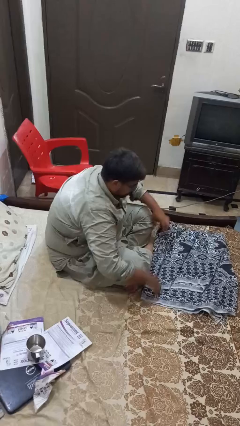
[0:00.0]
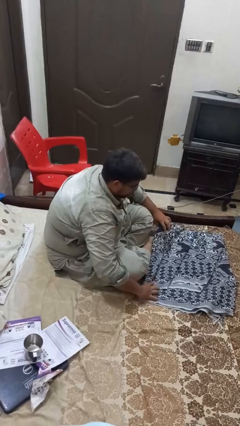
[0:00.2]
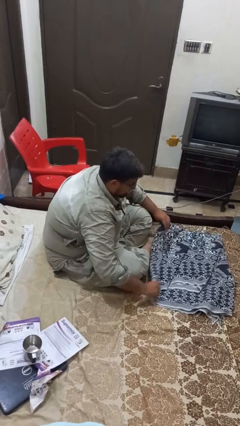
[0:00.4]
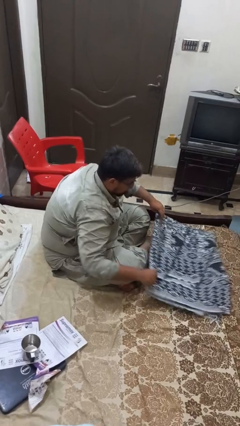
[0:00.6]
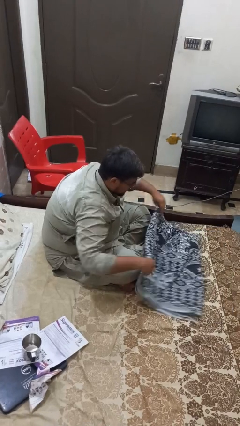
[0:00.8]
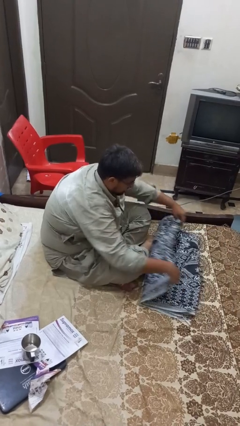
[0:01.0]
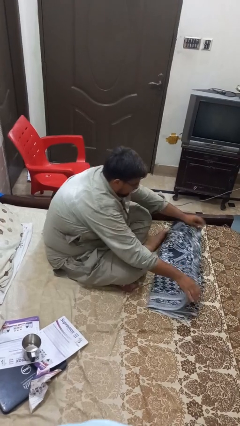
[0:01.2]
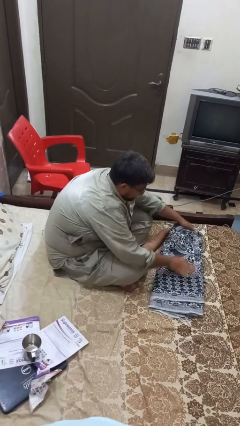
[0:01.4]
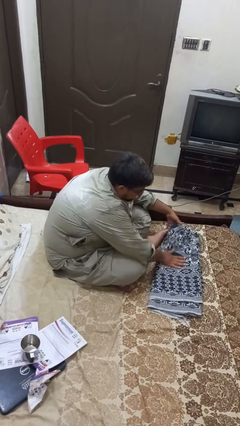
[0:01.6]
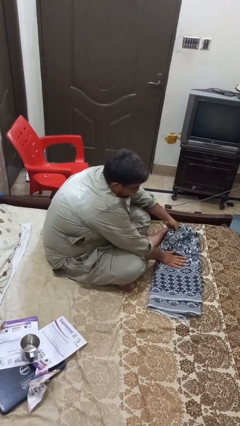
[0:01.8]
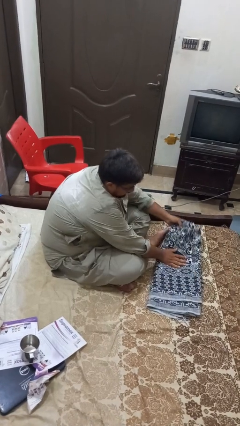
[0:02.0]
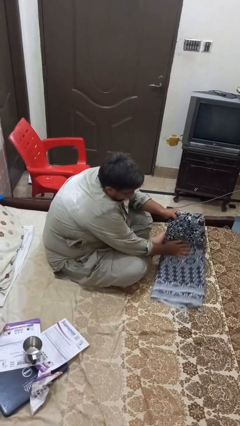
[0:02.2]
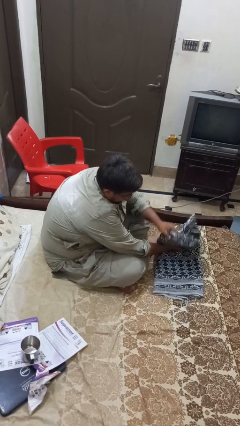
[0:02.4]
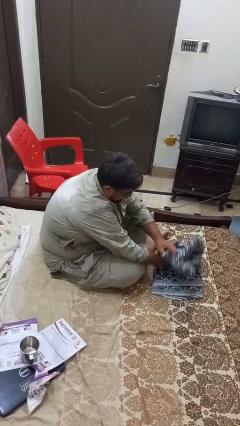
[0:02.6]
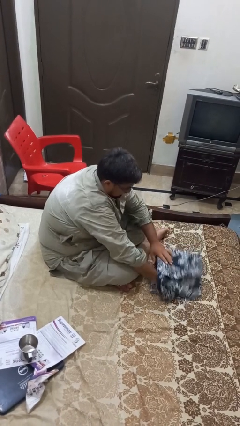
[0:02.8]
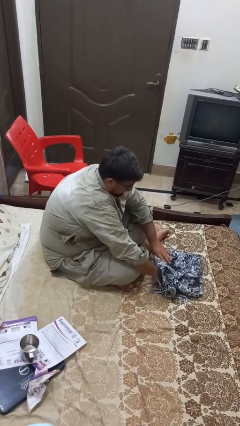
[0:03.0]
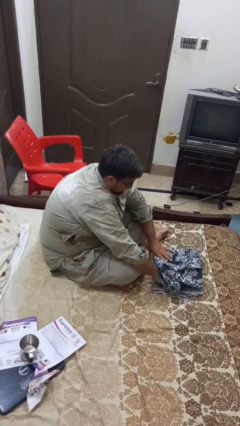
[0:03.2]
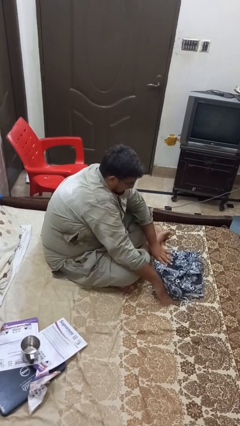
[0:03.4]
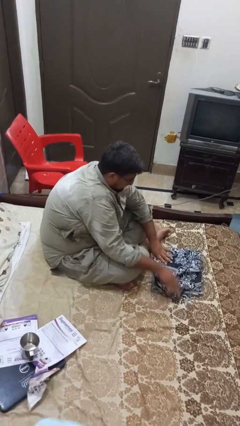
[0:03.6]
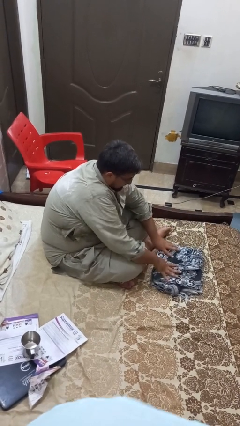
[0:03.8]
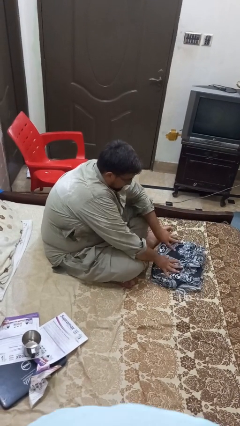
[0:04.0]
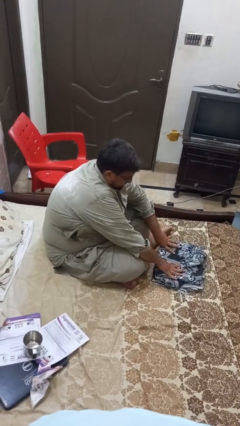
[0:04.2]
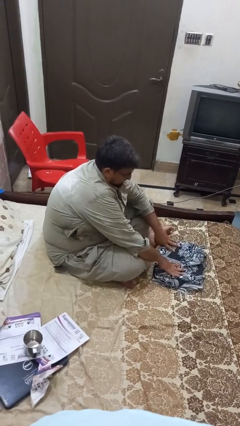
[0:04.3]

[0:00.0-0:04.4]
person folds blanket

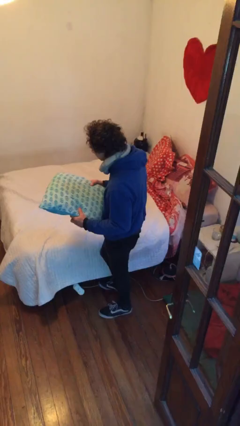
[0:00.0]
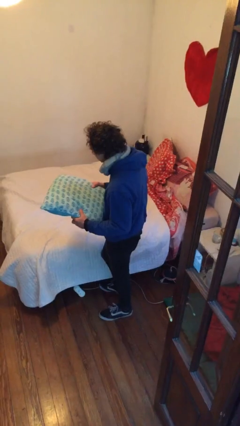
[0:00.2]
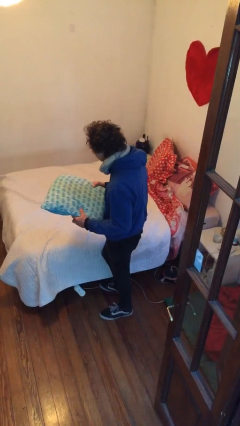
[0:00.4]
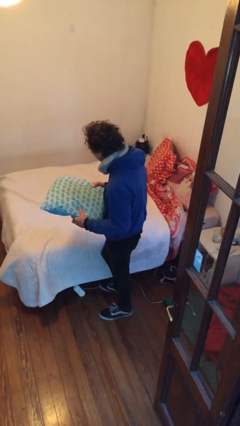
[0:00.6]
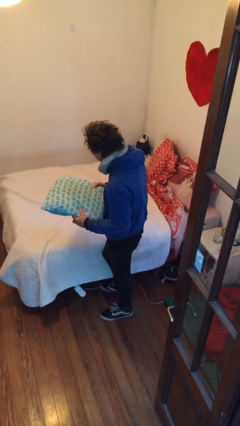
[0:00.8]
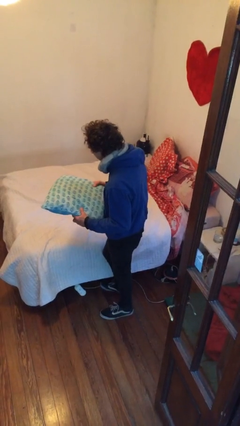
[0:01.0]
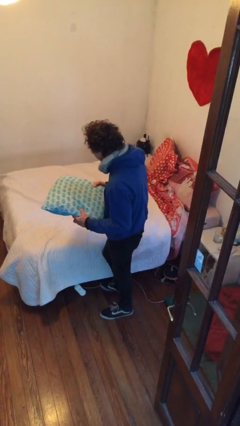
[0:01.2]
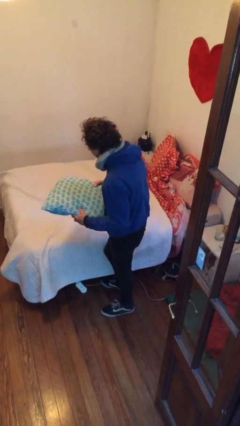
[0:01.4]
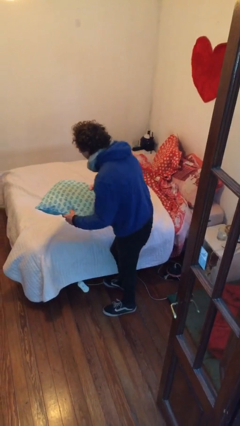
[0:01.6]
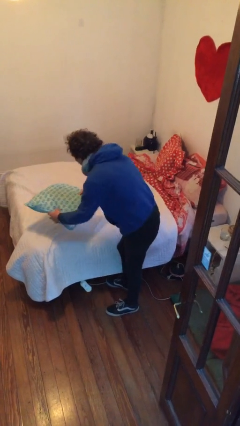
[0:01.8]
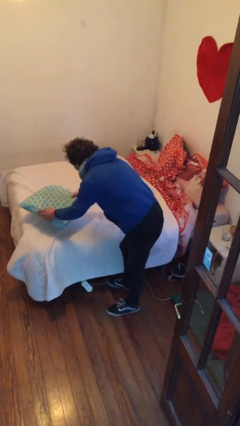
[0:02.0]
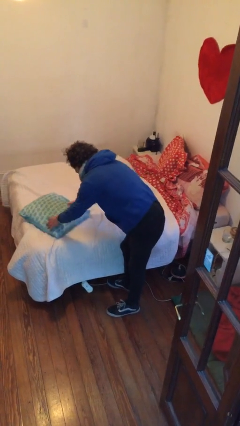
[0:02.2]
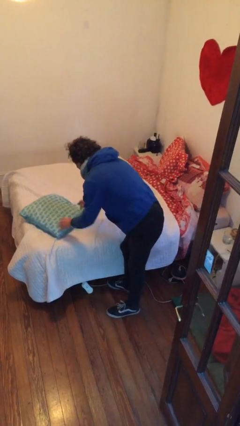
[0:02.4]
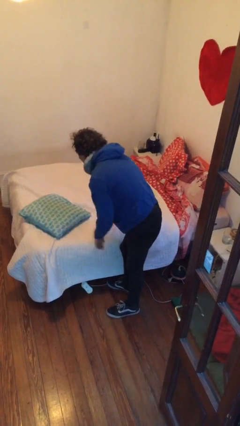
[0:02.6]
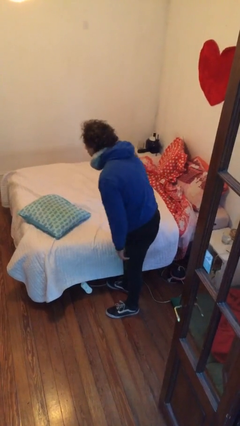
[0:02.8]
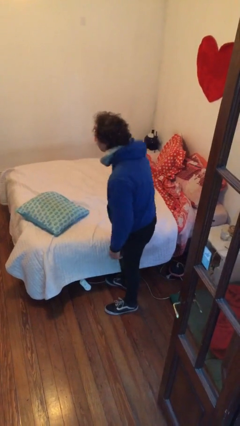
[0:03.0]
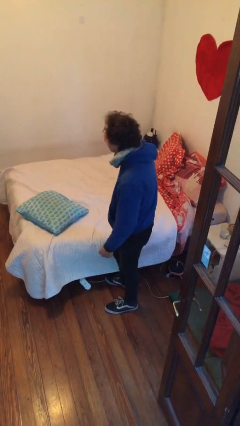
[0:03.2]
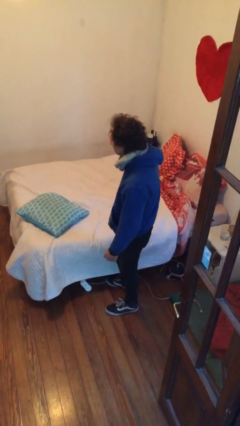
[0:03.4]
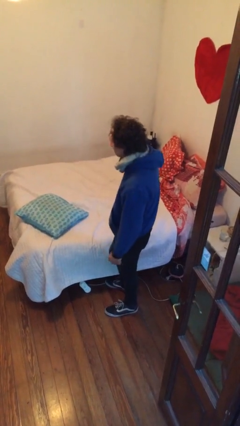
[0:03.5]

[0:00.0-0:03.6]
person puts down object on bed

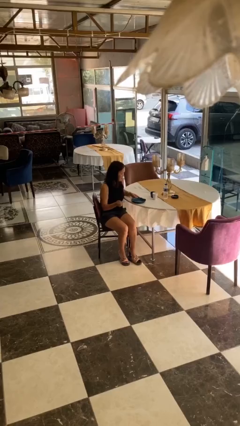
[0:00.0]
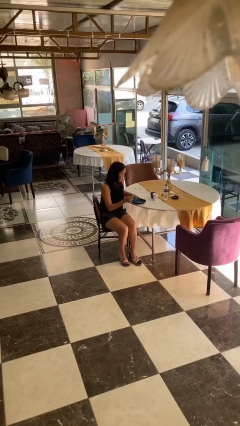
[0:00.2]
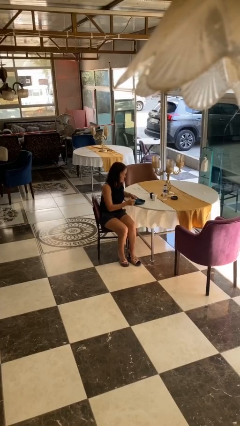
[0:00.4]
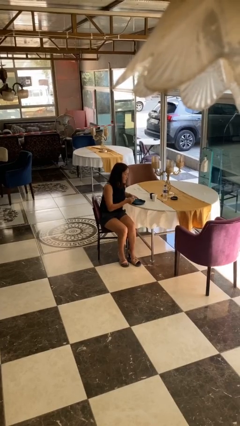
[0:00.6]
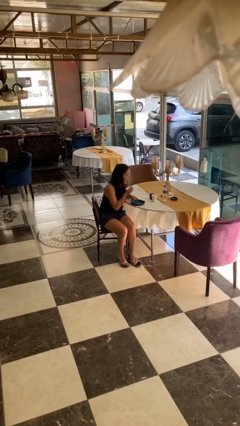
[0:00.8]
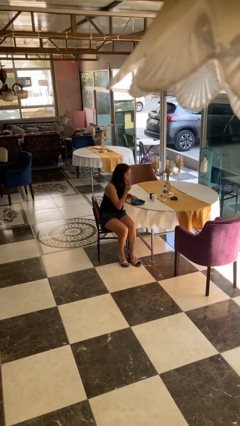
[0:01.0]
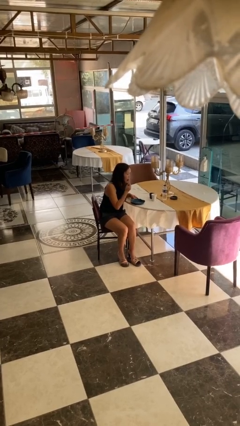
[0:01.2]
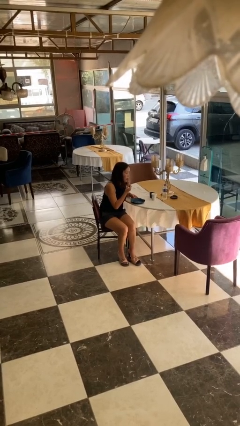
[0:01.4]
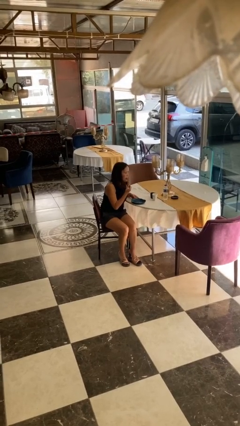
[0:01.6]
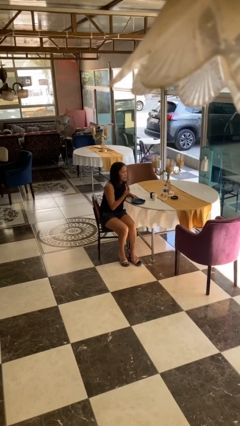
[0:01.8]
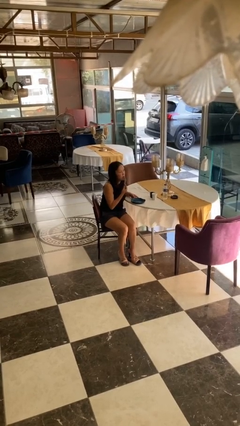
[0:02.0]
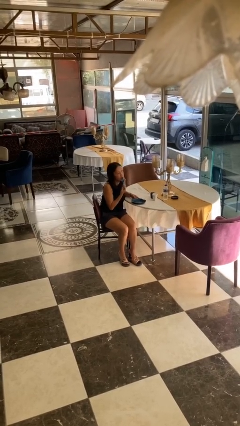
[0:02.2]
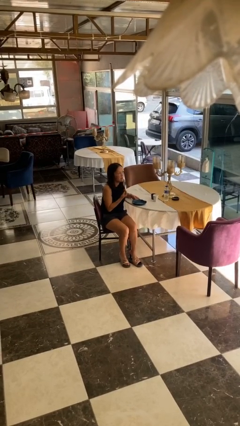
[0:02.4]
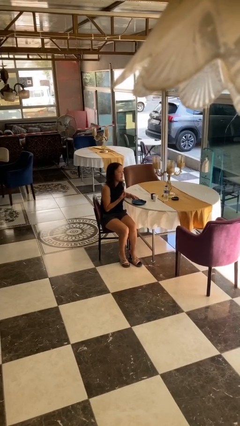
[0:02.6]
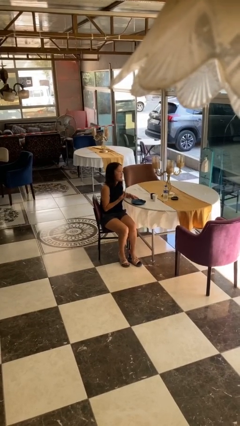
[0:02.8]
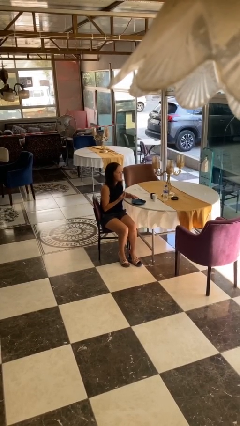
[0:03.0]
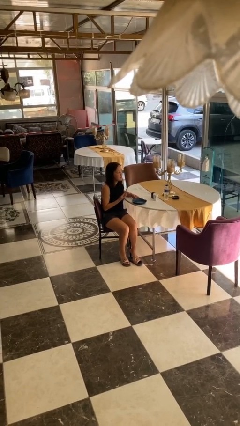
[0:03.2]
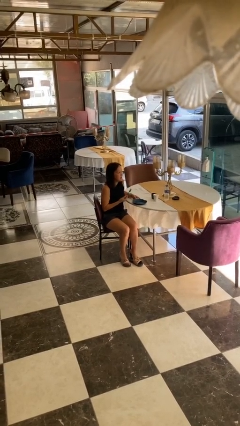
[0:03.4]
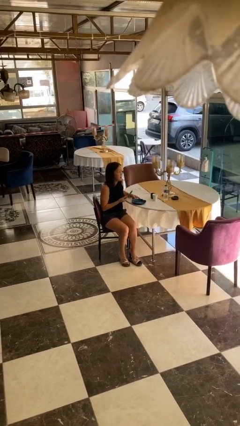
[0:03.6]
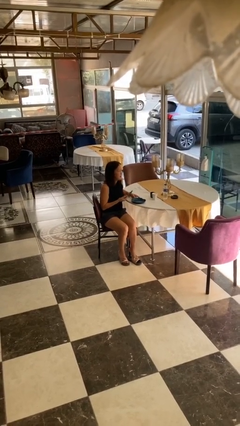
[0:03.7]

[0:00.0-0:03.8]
person eats with utensil

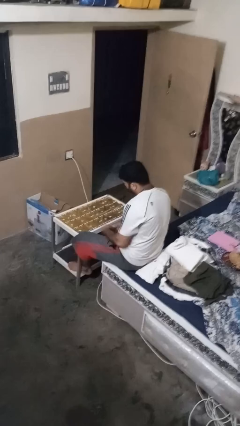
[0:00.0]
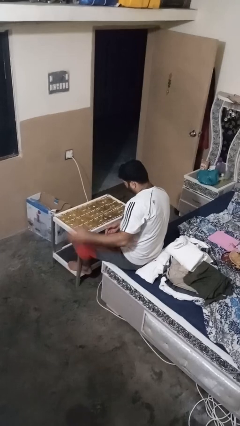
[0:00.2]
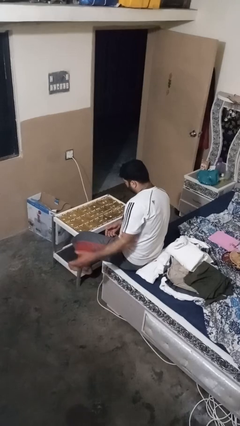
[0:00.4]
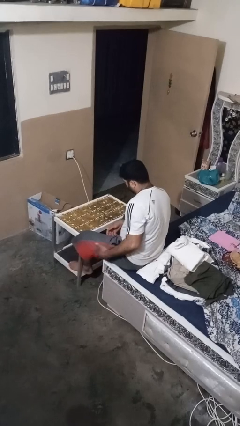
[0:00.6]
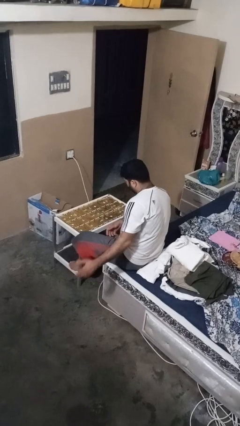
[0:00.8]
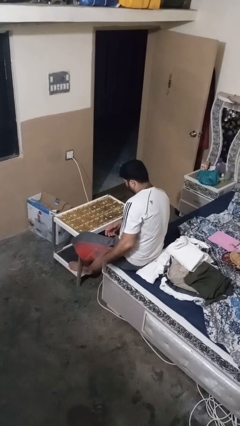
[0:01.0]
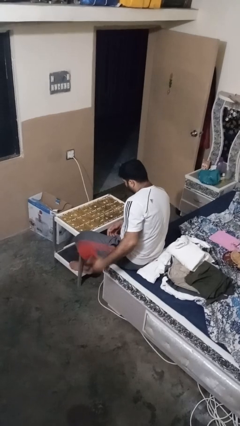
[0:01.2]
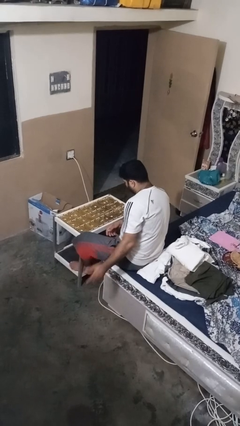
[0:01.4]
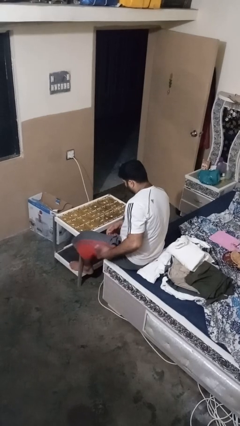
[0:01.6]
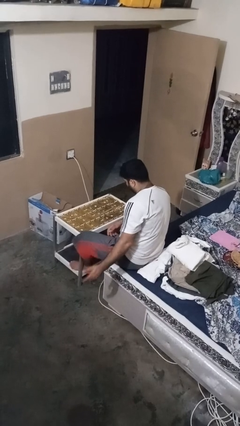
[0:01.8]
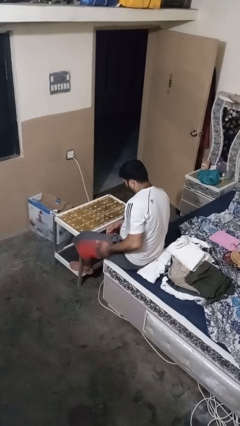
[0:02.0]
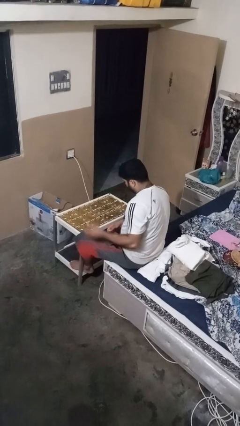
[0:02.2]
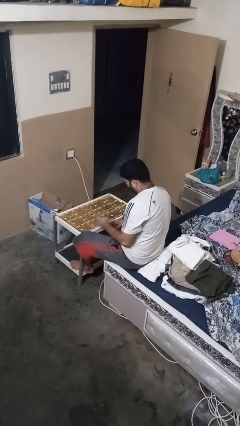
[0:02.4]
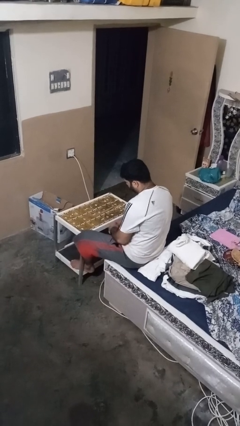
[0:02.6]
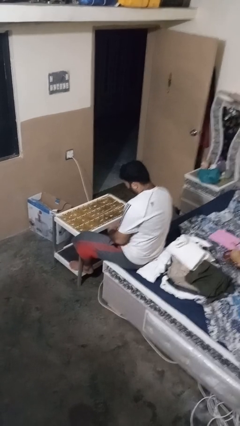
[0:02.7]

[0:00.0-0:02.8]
person slaps hands on thighs

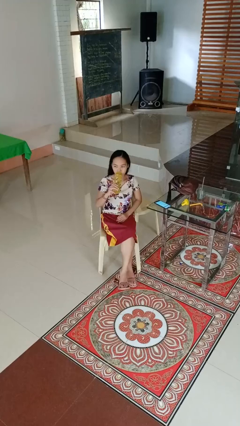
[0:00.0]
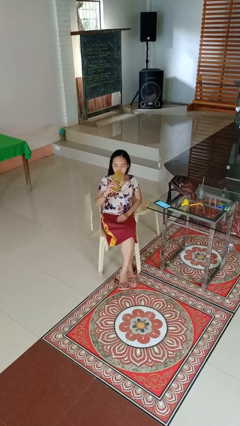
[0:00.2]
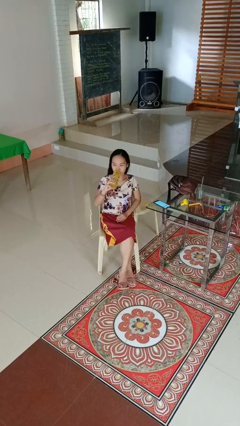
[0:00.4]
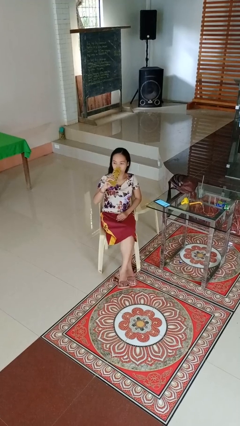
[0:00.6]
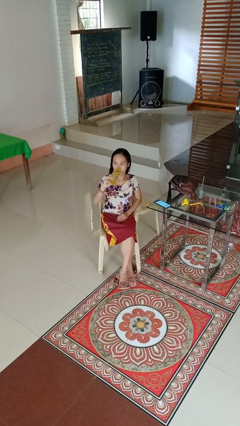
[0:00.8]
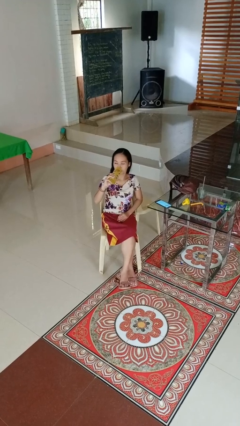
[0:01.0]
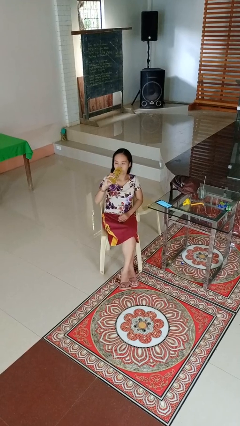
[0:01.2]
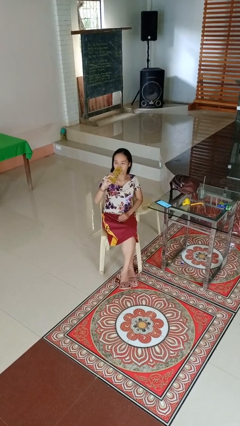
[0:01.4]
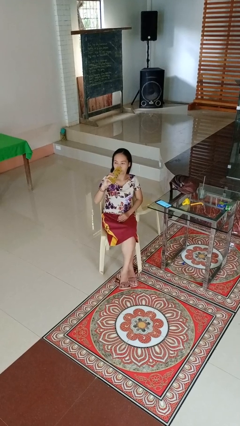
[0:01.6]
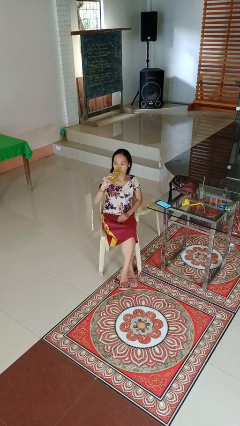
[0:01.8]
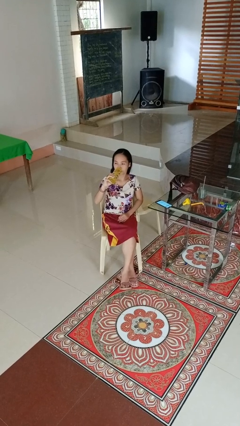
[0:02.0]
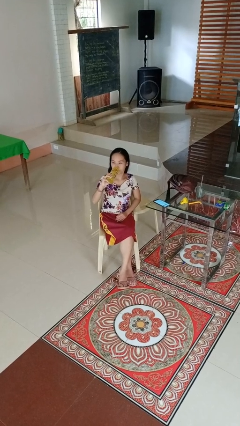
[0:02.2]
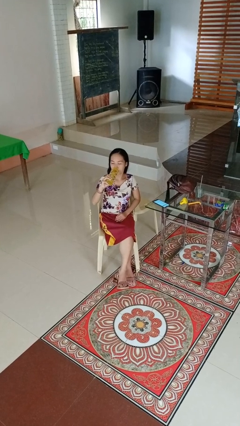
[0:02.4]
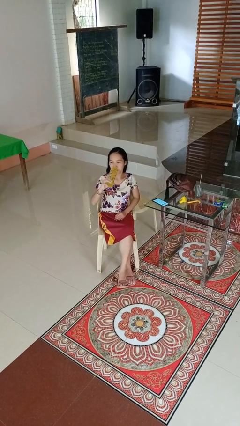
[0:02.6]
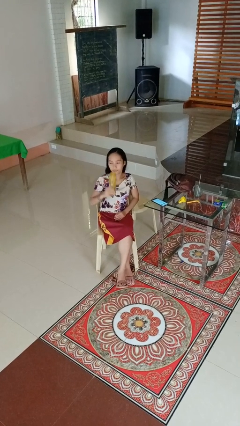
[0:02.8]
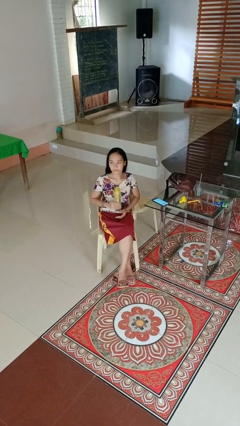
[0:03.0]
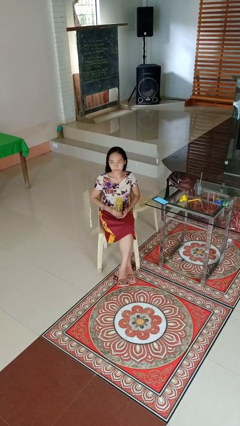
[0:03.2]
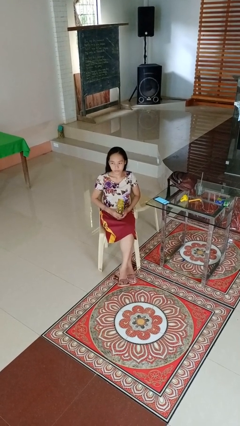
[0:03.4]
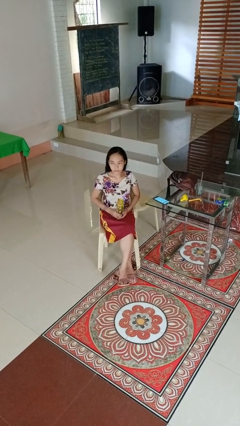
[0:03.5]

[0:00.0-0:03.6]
person drinks from bottle
